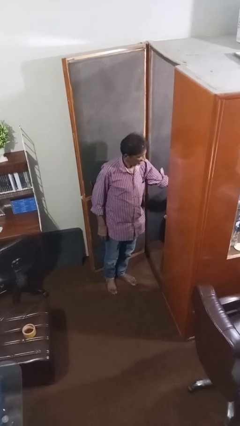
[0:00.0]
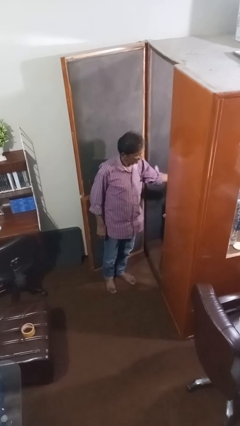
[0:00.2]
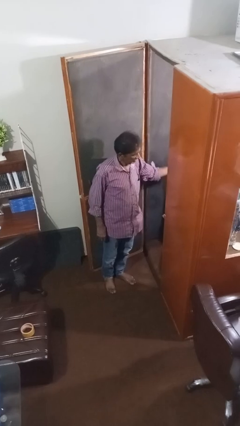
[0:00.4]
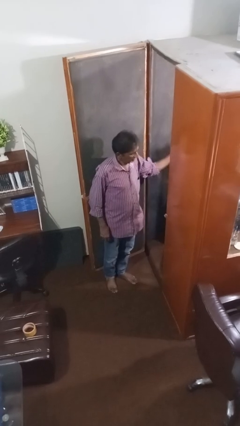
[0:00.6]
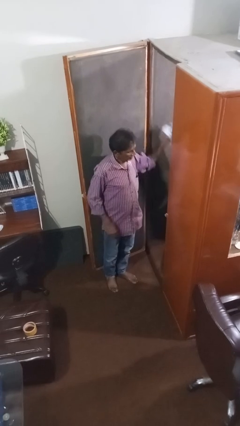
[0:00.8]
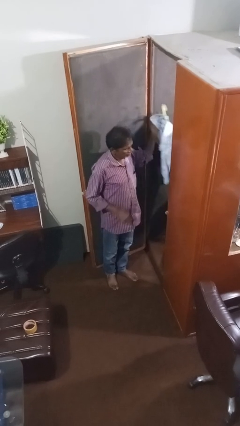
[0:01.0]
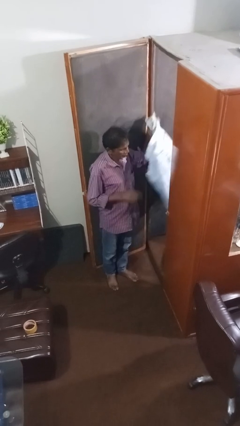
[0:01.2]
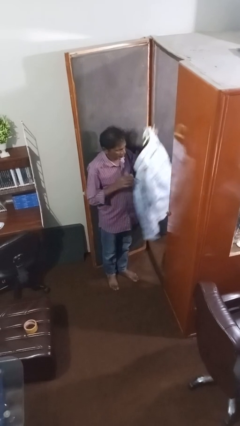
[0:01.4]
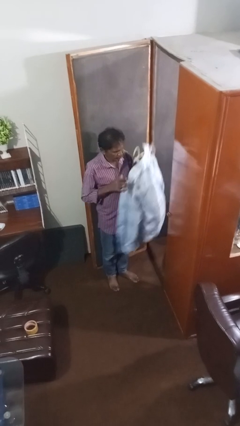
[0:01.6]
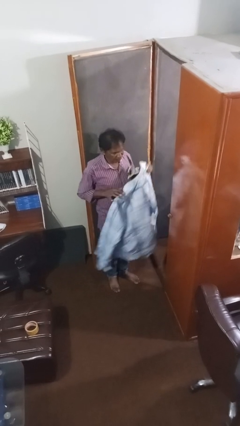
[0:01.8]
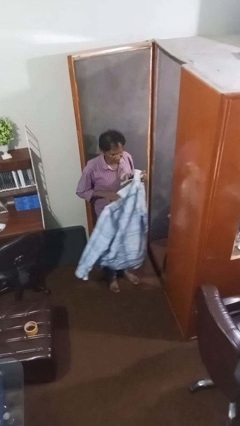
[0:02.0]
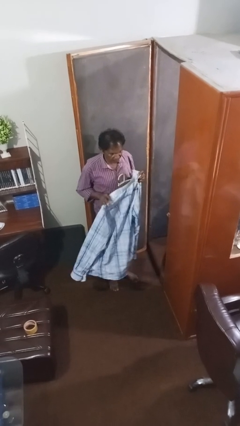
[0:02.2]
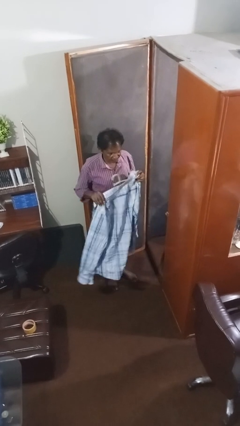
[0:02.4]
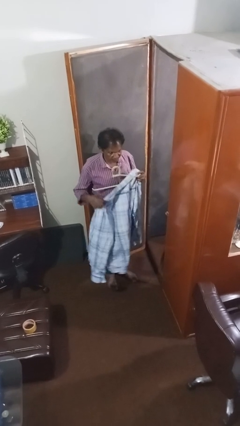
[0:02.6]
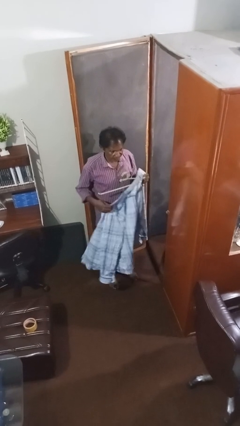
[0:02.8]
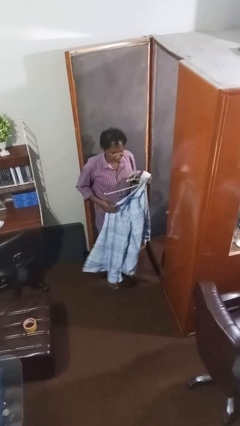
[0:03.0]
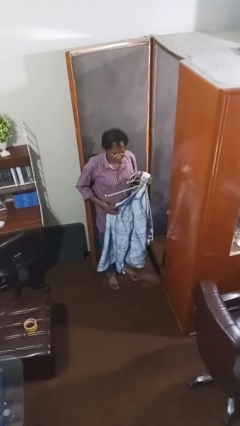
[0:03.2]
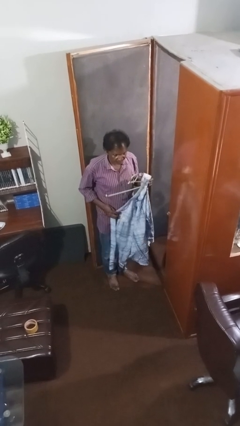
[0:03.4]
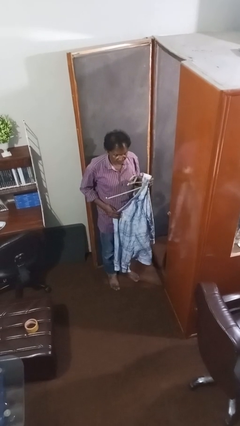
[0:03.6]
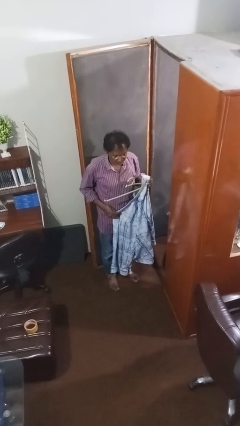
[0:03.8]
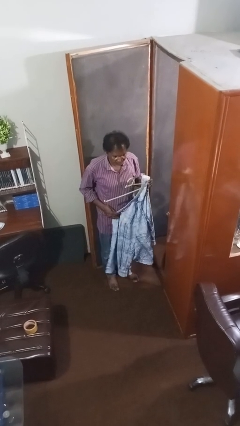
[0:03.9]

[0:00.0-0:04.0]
person takes clothes from closet

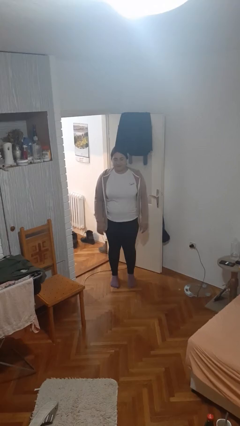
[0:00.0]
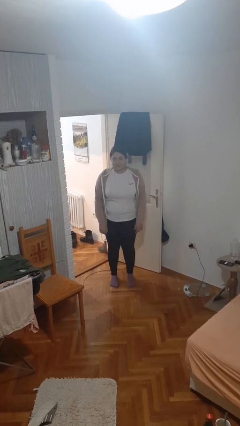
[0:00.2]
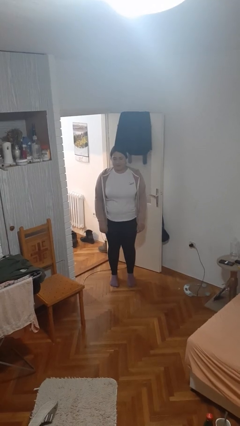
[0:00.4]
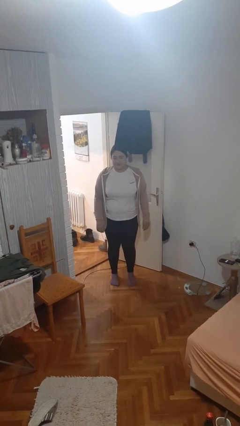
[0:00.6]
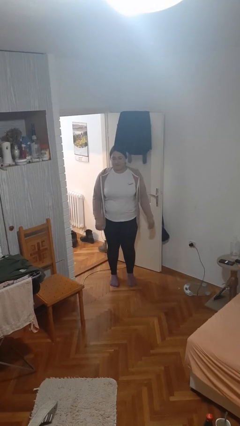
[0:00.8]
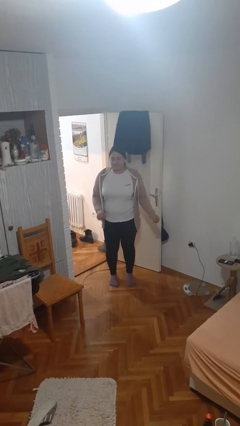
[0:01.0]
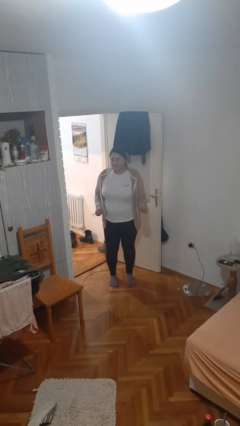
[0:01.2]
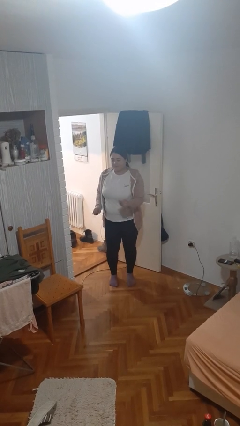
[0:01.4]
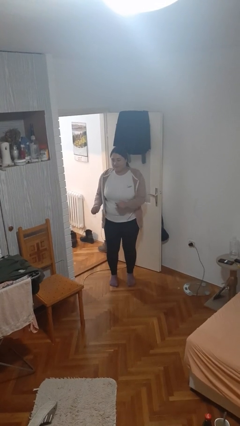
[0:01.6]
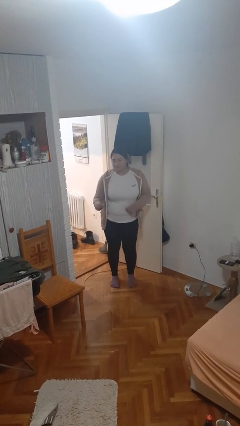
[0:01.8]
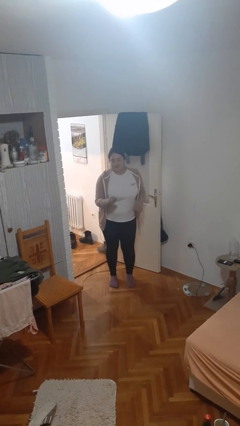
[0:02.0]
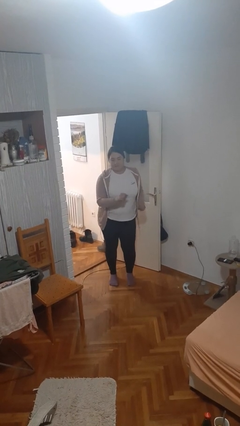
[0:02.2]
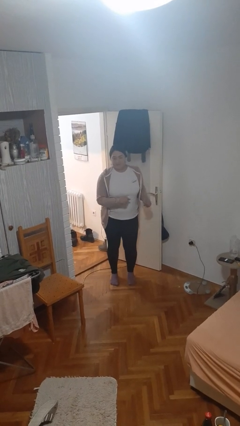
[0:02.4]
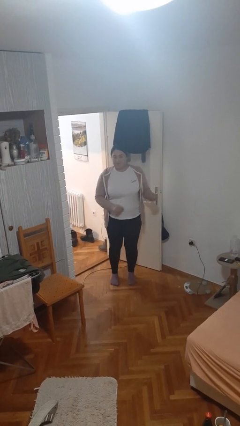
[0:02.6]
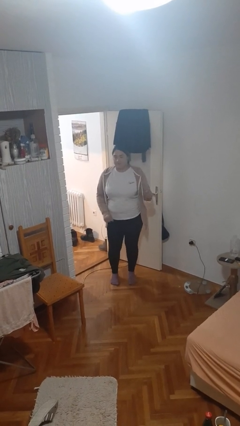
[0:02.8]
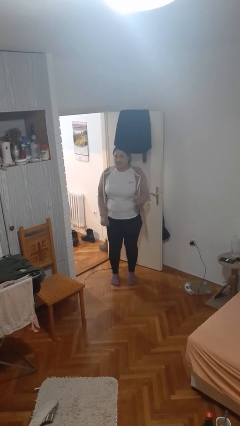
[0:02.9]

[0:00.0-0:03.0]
person dances in place

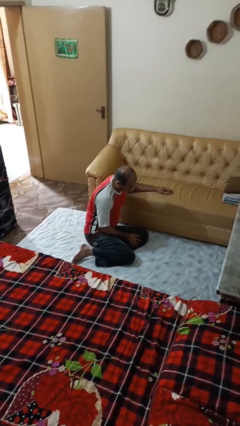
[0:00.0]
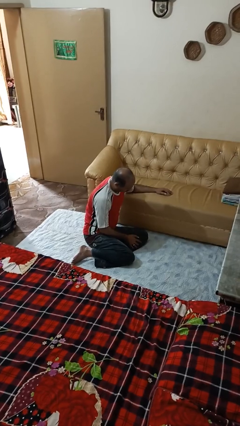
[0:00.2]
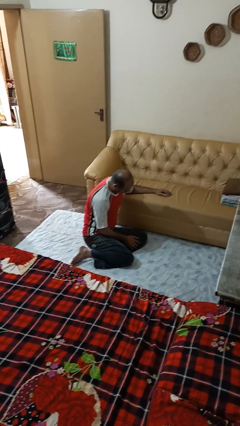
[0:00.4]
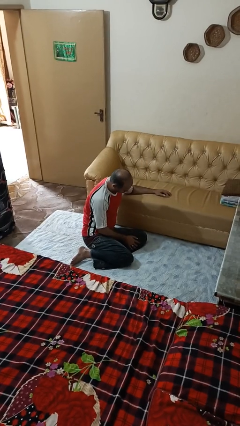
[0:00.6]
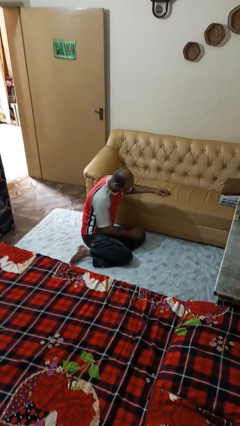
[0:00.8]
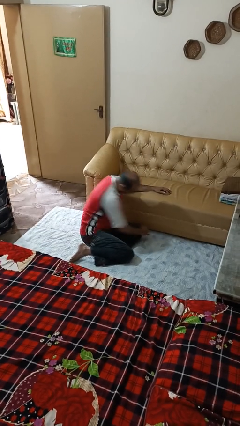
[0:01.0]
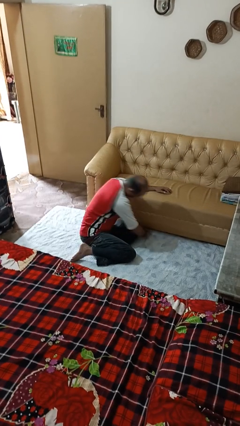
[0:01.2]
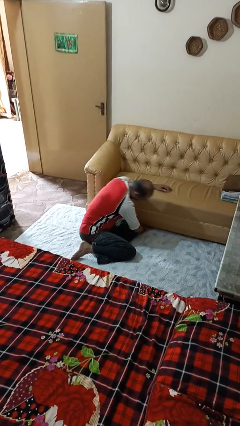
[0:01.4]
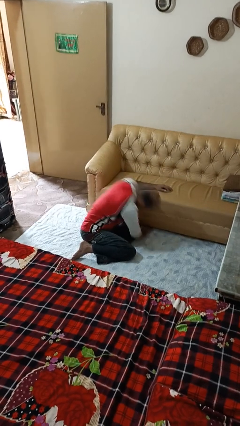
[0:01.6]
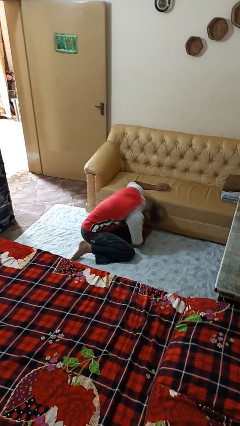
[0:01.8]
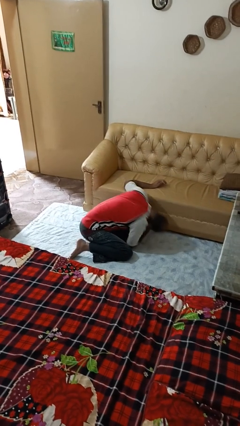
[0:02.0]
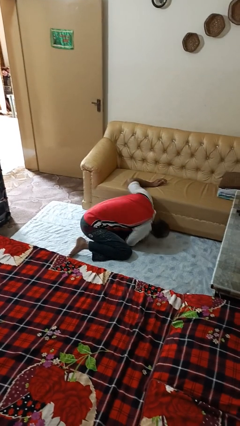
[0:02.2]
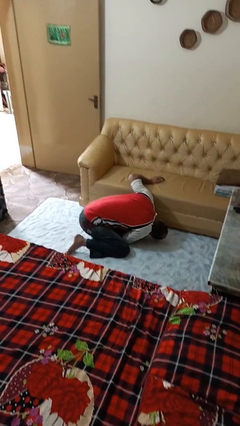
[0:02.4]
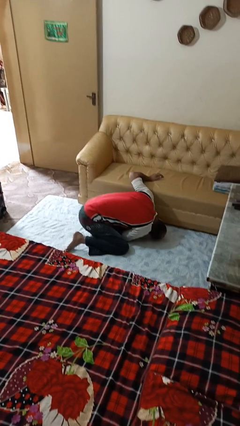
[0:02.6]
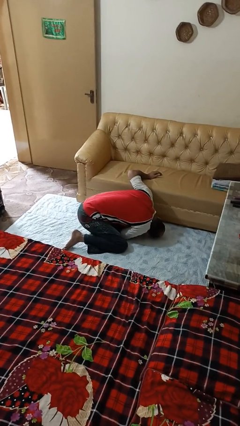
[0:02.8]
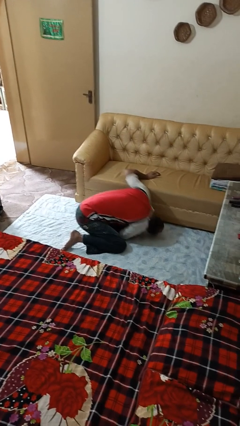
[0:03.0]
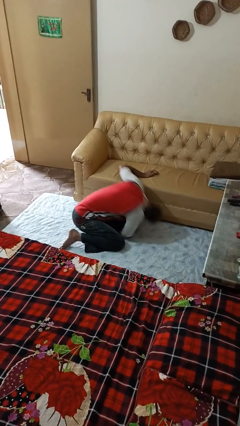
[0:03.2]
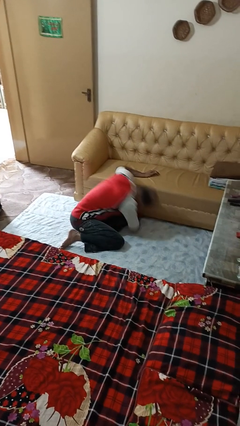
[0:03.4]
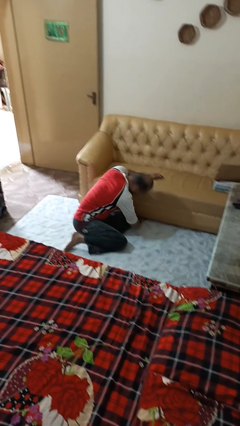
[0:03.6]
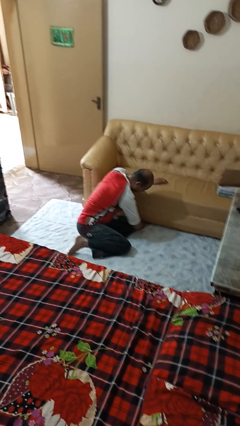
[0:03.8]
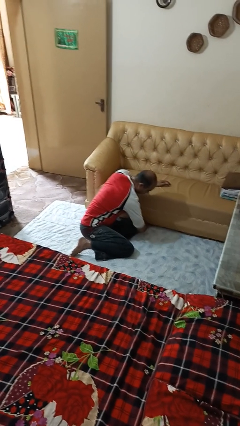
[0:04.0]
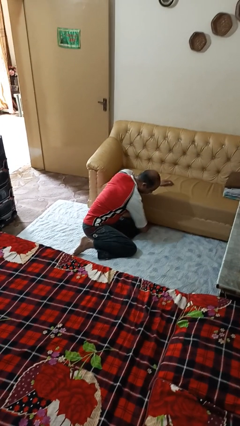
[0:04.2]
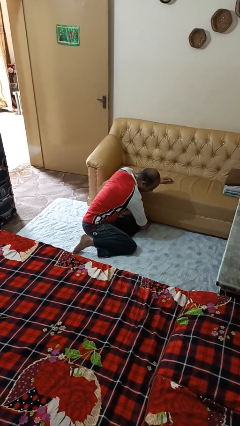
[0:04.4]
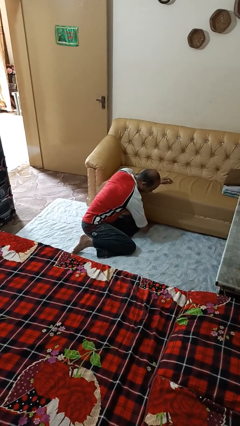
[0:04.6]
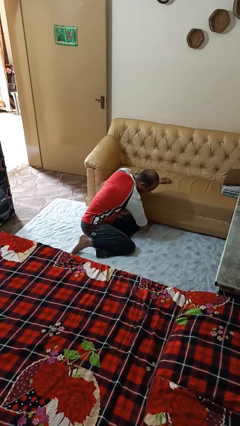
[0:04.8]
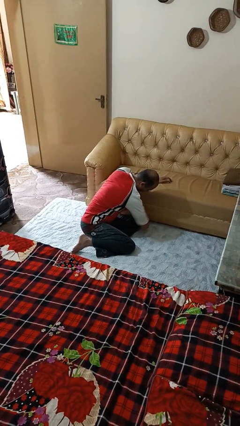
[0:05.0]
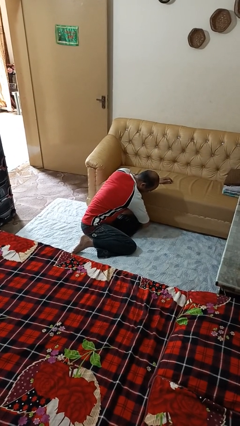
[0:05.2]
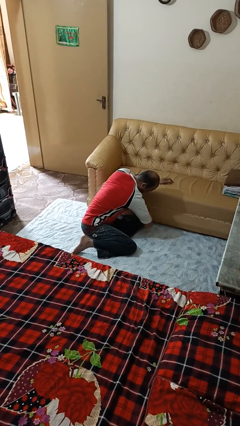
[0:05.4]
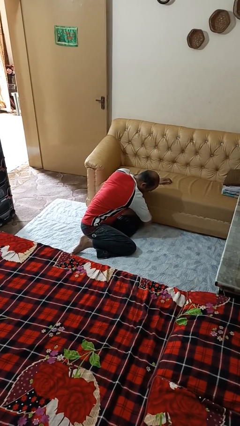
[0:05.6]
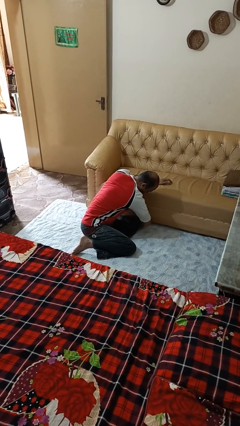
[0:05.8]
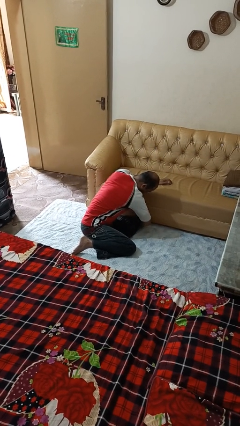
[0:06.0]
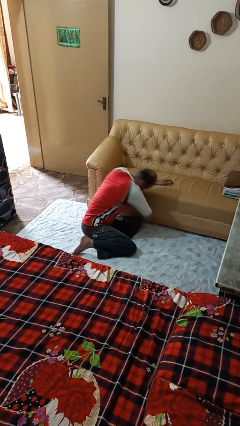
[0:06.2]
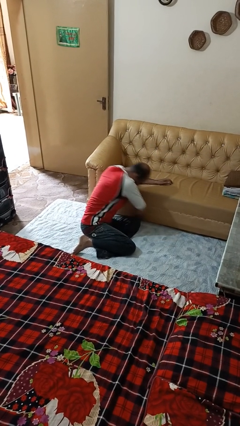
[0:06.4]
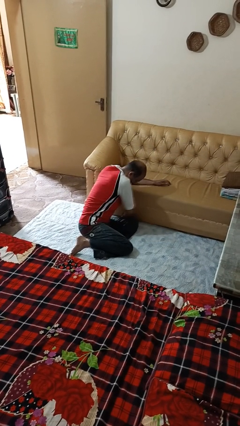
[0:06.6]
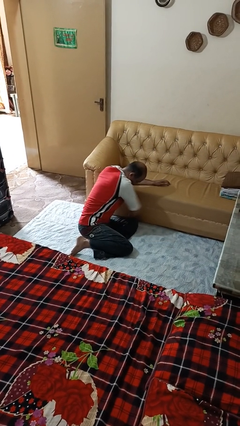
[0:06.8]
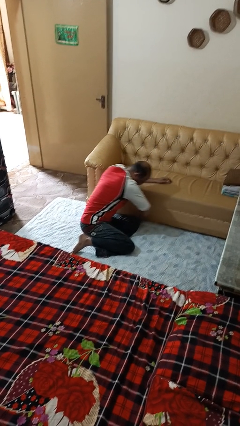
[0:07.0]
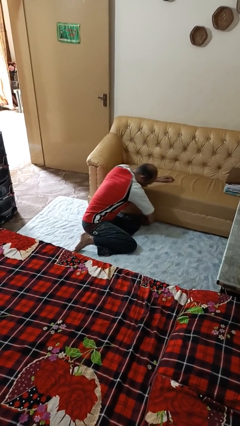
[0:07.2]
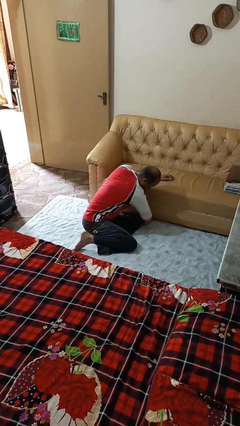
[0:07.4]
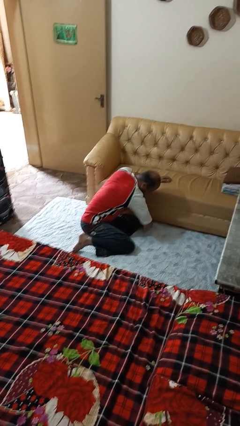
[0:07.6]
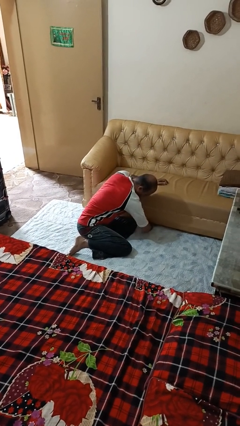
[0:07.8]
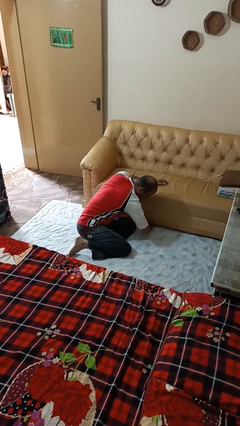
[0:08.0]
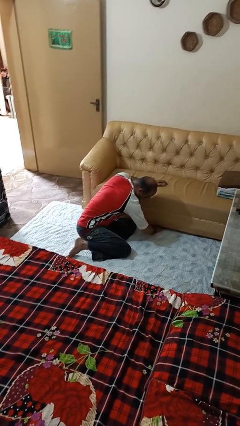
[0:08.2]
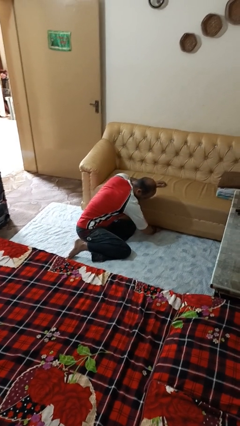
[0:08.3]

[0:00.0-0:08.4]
person searches under couch

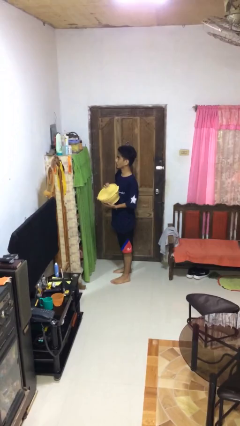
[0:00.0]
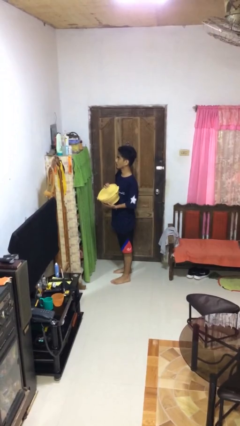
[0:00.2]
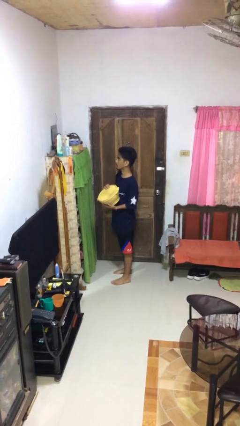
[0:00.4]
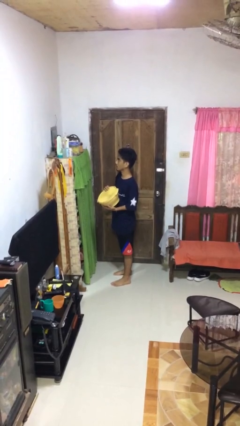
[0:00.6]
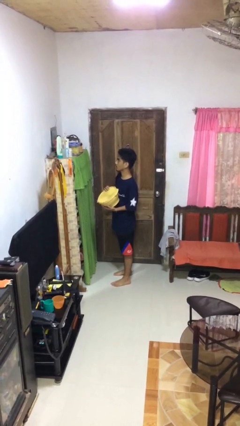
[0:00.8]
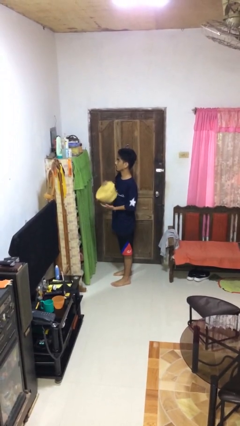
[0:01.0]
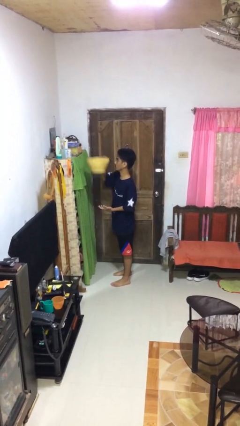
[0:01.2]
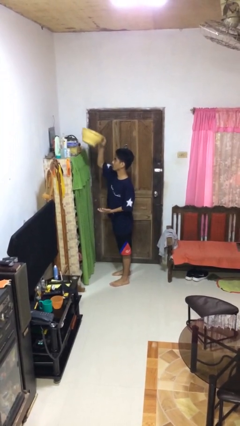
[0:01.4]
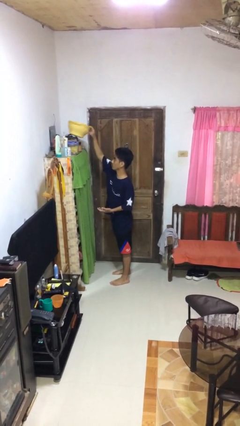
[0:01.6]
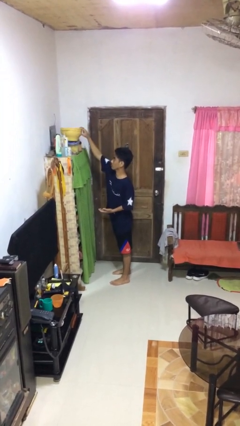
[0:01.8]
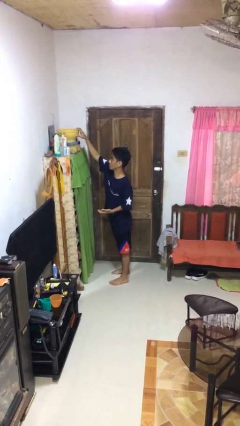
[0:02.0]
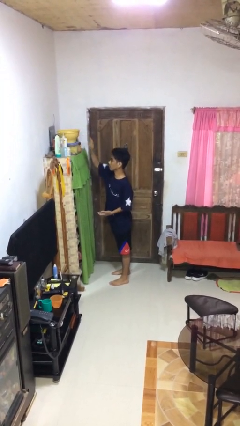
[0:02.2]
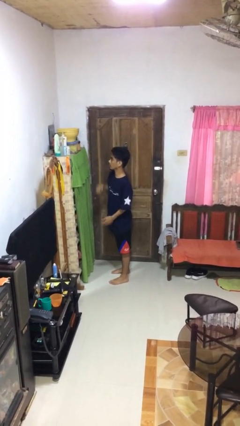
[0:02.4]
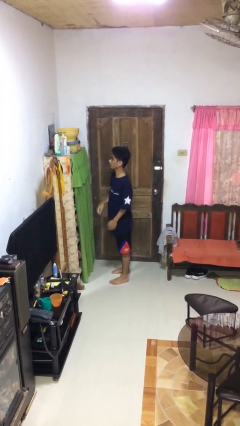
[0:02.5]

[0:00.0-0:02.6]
person puts down object on shelf

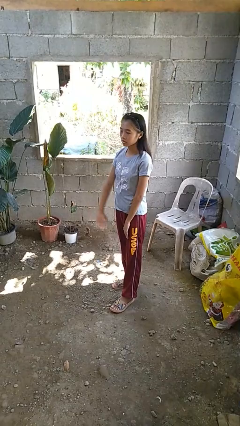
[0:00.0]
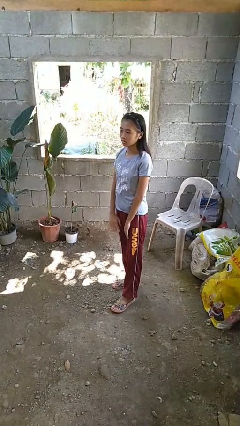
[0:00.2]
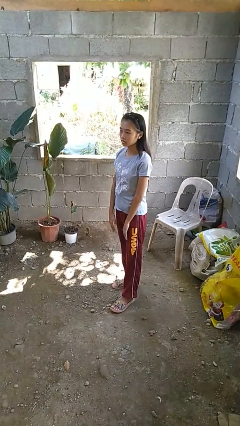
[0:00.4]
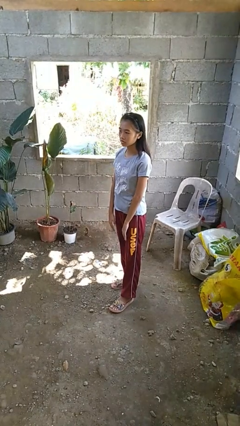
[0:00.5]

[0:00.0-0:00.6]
person gestures swipe down
